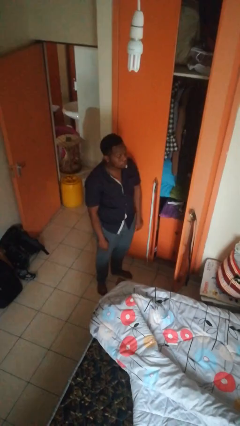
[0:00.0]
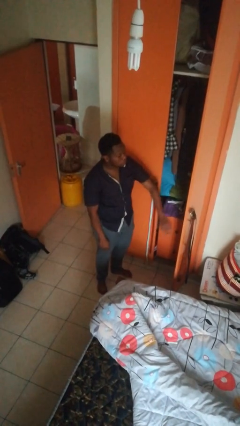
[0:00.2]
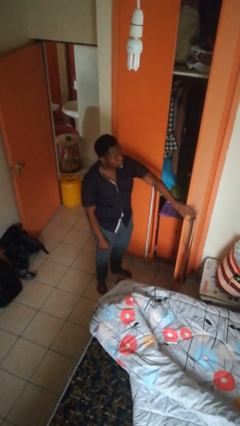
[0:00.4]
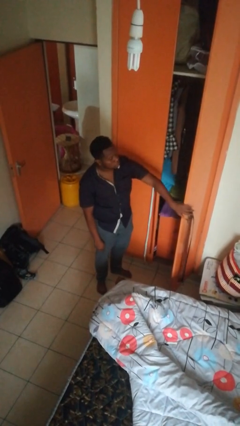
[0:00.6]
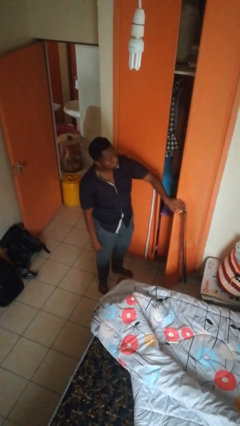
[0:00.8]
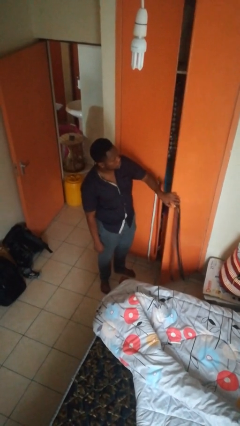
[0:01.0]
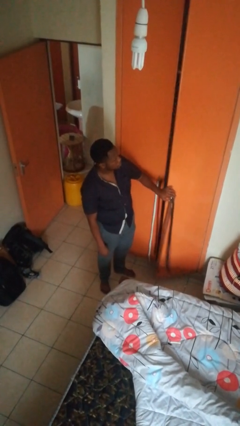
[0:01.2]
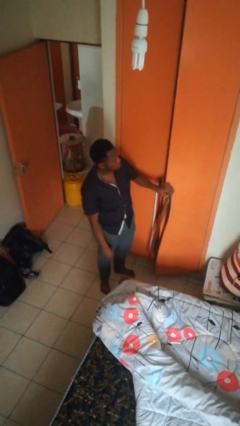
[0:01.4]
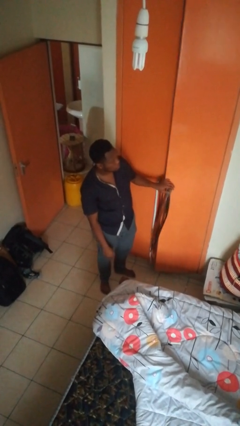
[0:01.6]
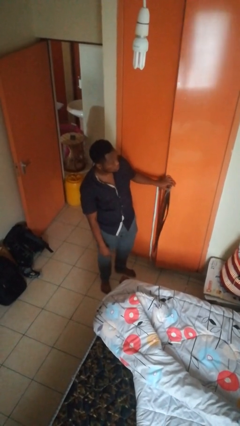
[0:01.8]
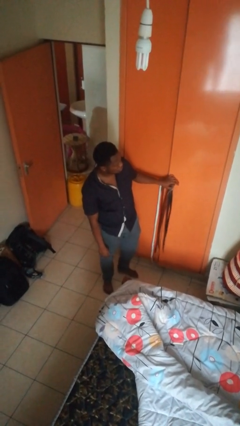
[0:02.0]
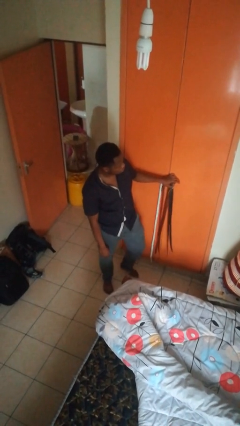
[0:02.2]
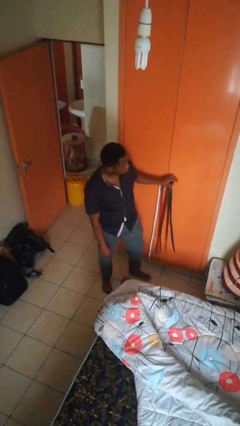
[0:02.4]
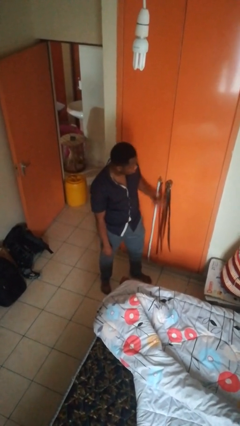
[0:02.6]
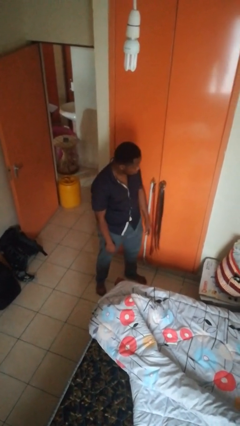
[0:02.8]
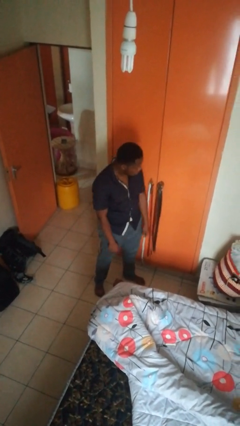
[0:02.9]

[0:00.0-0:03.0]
person closes closet door

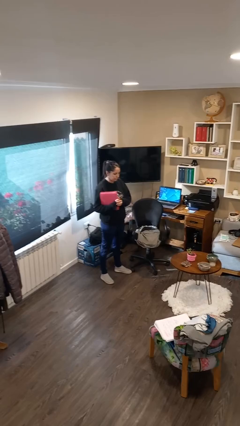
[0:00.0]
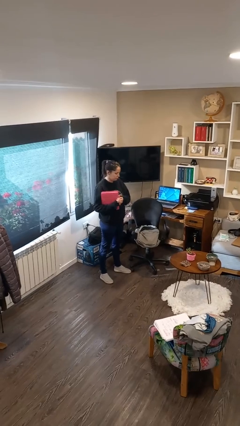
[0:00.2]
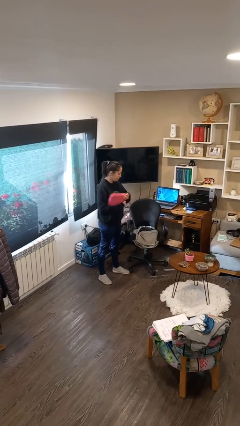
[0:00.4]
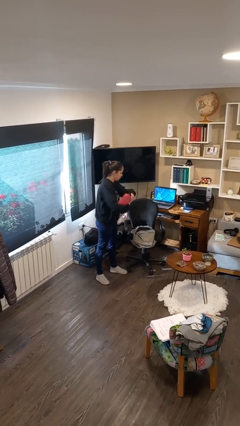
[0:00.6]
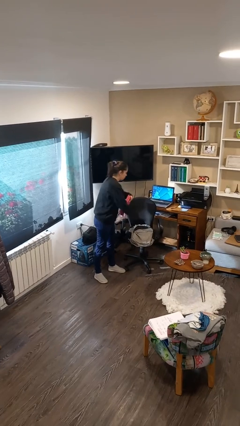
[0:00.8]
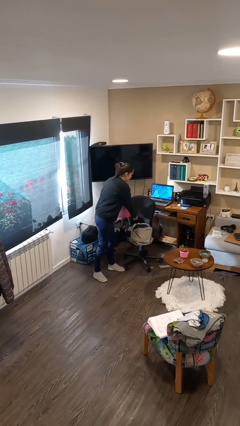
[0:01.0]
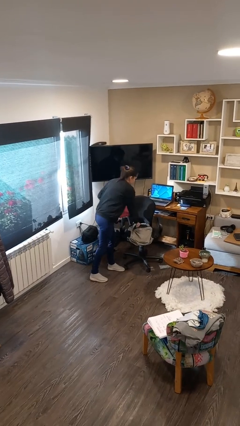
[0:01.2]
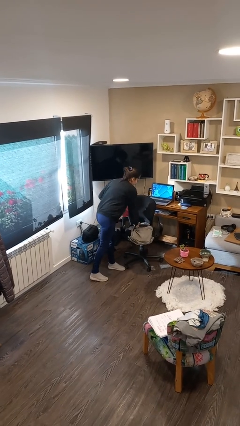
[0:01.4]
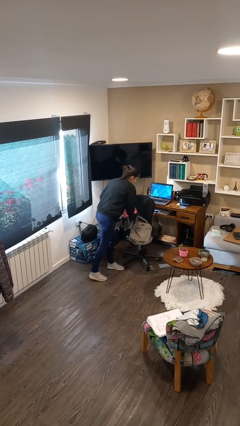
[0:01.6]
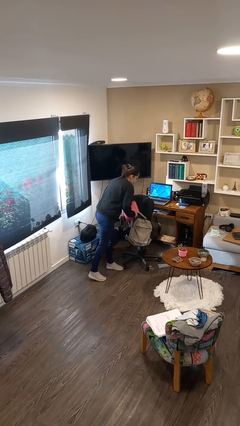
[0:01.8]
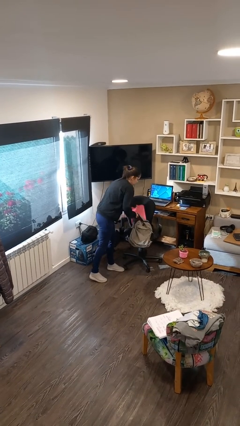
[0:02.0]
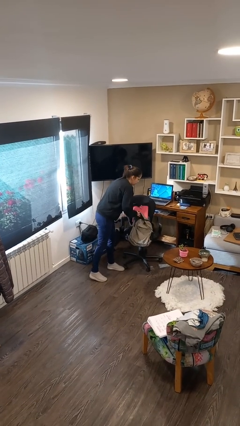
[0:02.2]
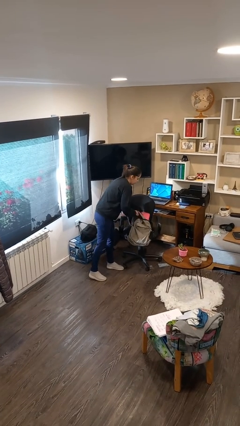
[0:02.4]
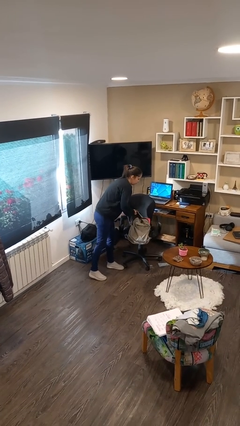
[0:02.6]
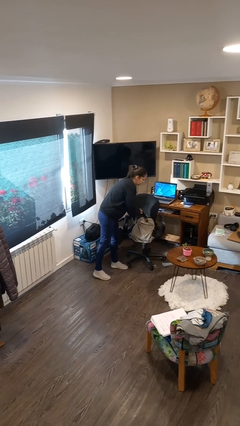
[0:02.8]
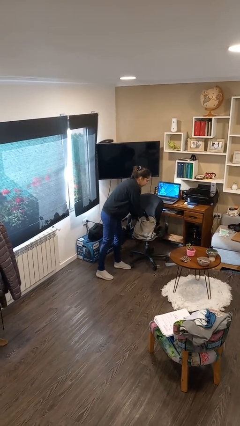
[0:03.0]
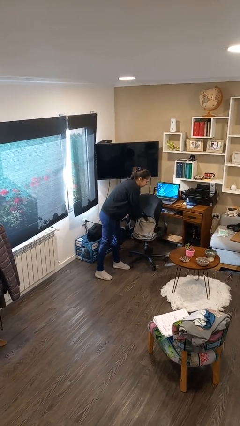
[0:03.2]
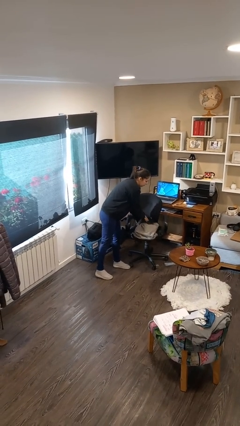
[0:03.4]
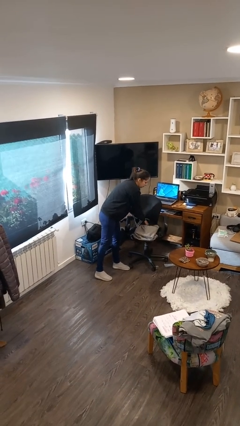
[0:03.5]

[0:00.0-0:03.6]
person puts object into backpack

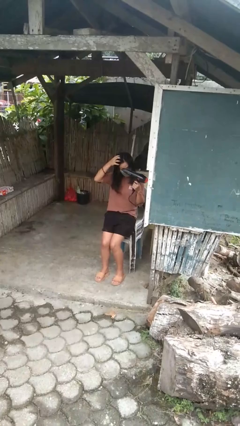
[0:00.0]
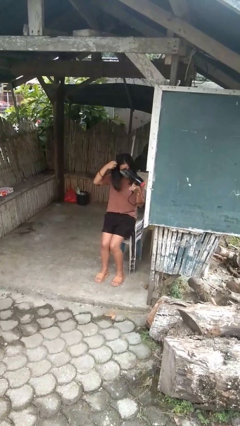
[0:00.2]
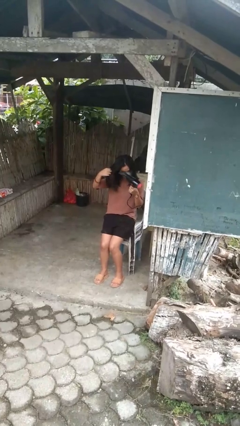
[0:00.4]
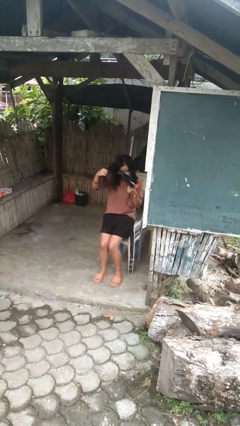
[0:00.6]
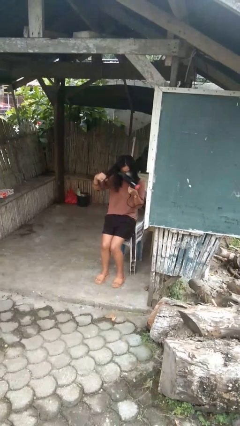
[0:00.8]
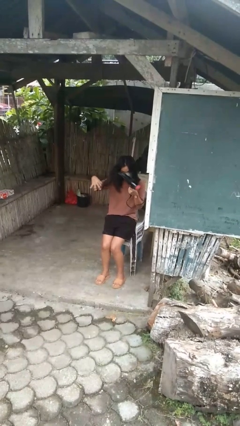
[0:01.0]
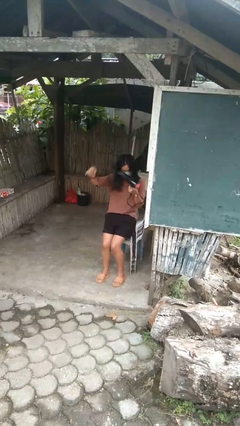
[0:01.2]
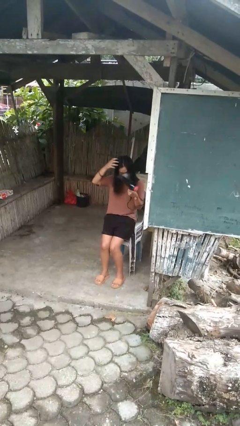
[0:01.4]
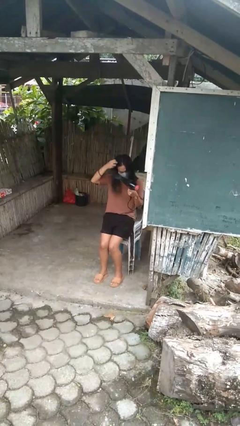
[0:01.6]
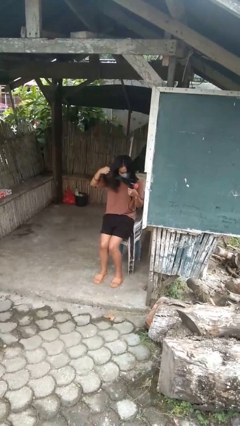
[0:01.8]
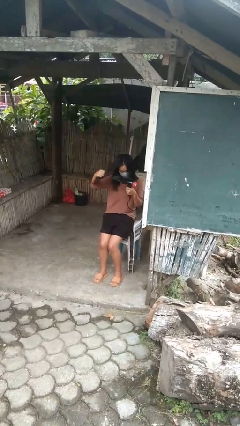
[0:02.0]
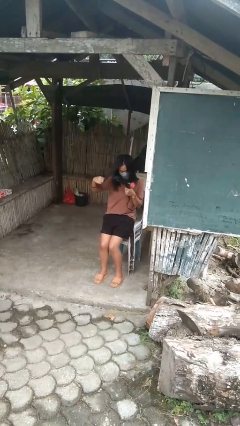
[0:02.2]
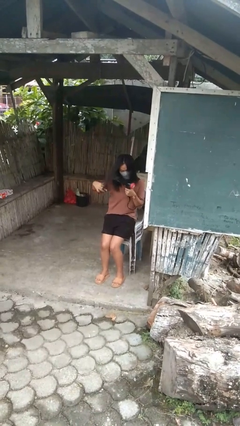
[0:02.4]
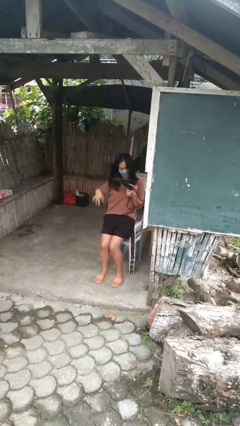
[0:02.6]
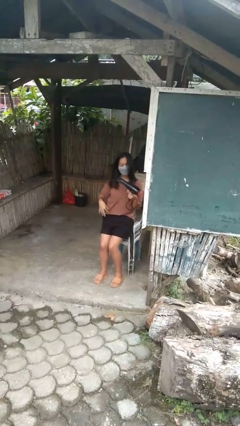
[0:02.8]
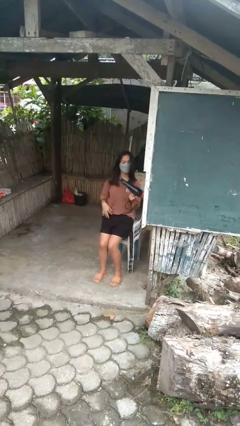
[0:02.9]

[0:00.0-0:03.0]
person dries hair with hairdryer

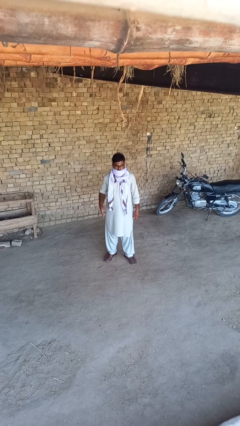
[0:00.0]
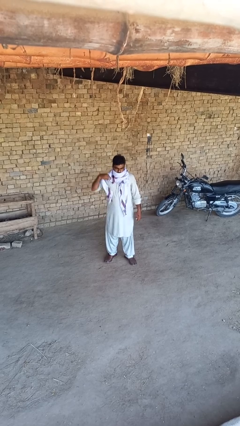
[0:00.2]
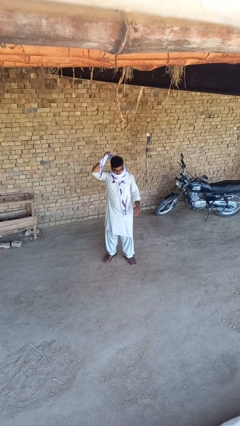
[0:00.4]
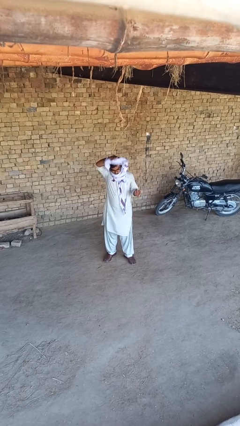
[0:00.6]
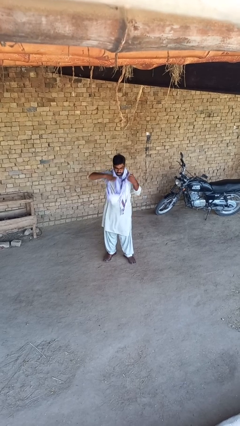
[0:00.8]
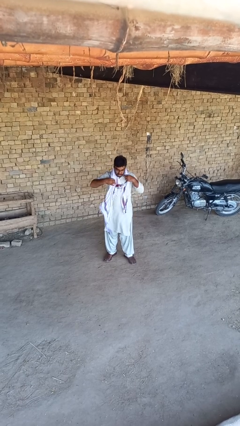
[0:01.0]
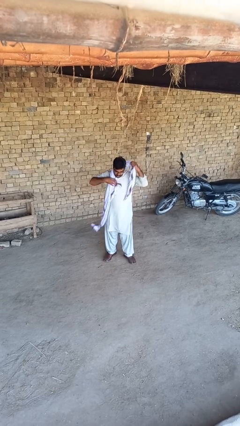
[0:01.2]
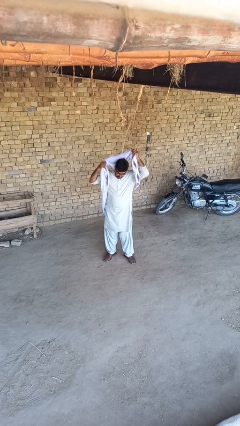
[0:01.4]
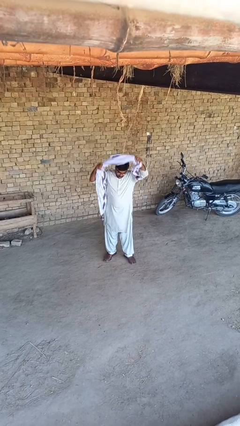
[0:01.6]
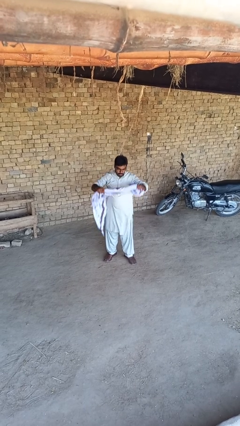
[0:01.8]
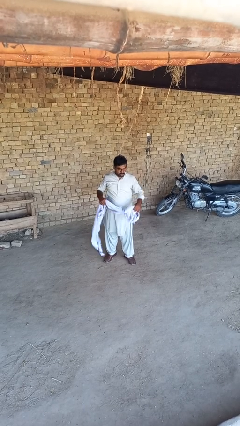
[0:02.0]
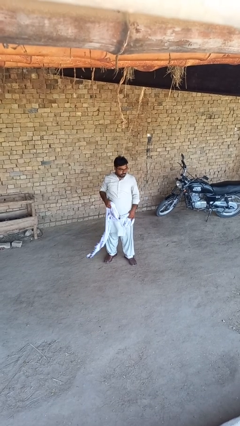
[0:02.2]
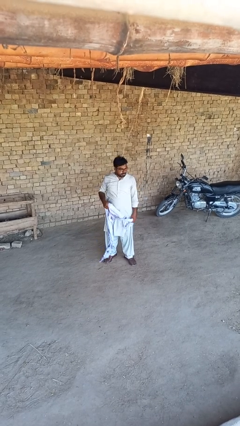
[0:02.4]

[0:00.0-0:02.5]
person takes off scarf

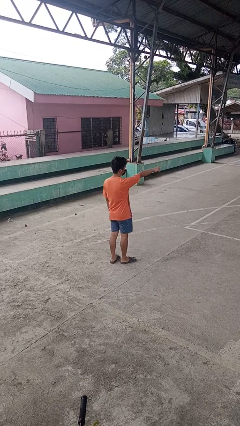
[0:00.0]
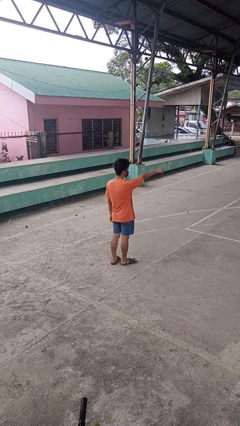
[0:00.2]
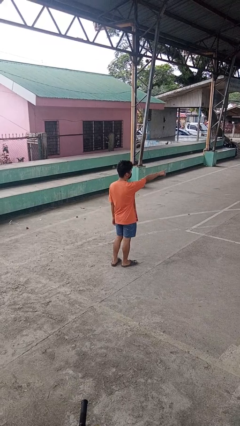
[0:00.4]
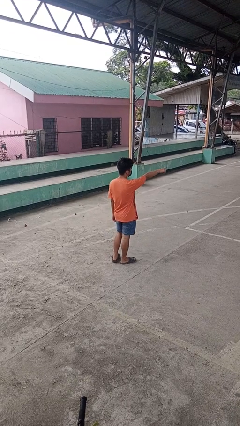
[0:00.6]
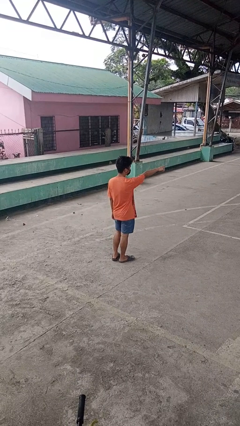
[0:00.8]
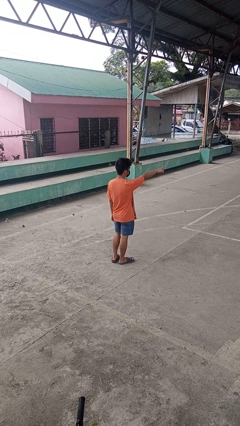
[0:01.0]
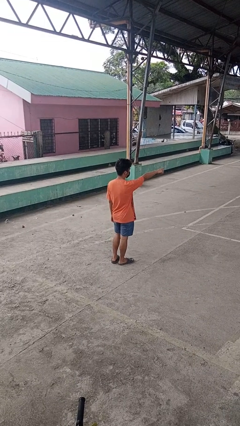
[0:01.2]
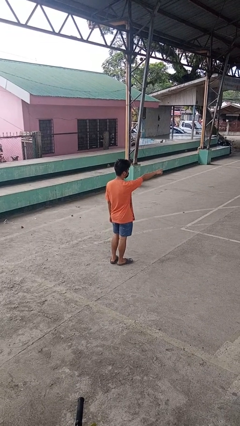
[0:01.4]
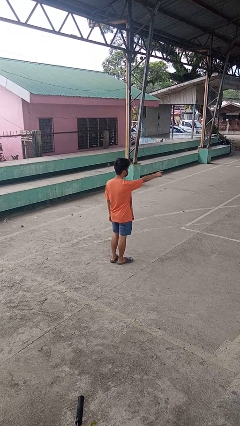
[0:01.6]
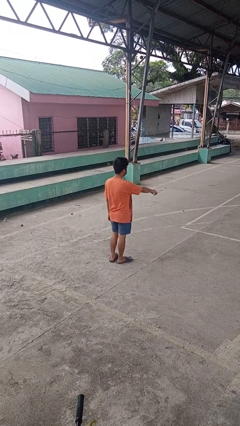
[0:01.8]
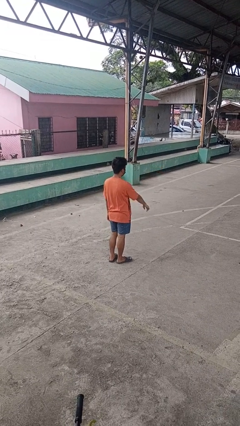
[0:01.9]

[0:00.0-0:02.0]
person points at person

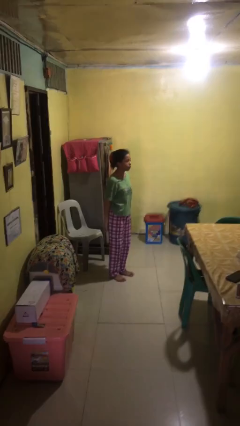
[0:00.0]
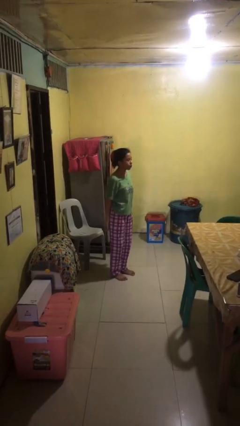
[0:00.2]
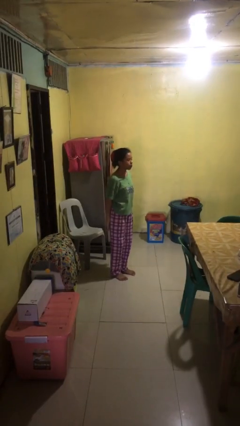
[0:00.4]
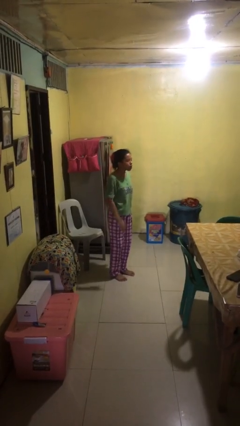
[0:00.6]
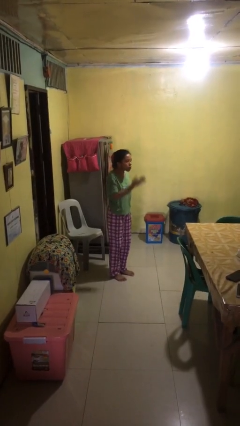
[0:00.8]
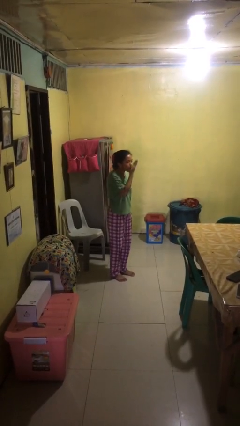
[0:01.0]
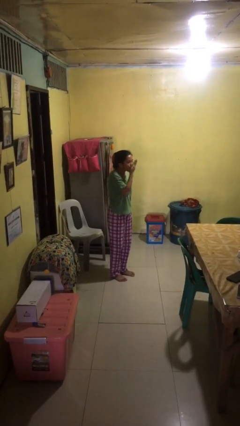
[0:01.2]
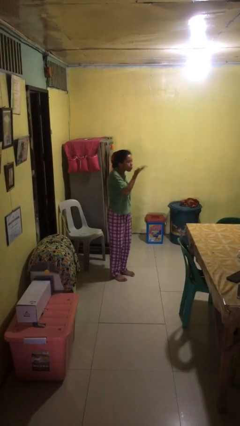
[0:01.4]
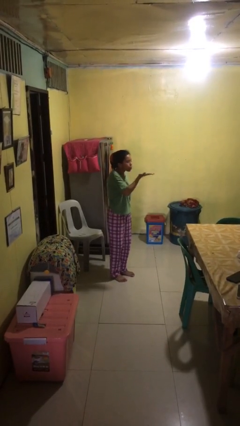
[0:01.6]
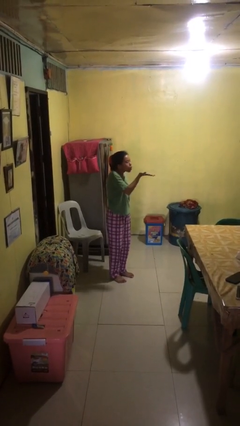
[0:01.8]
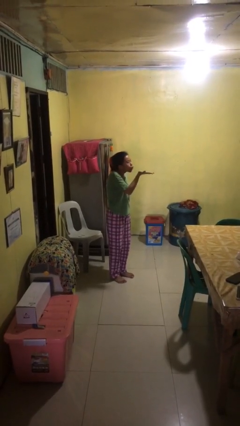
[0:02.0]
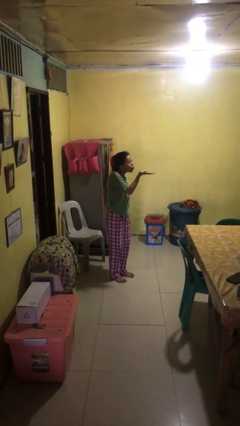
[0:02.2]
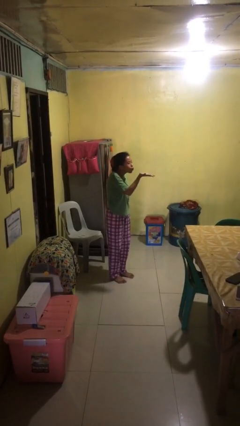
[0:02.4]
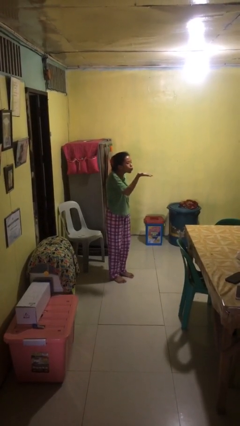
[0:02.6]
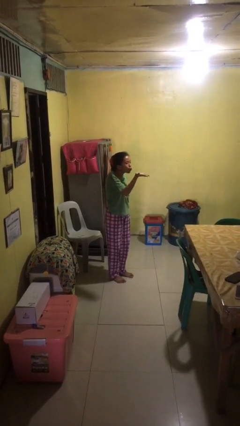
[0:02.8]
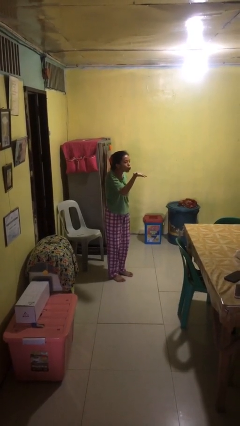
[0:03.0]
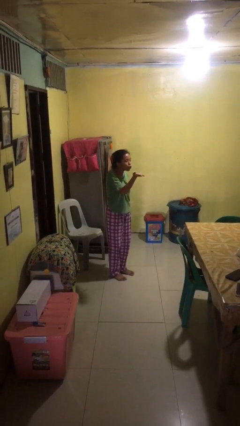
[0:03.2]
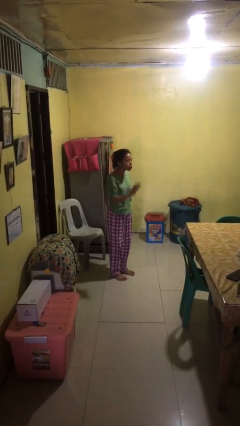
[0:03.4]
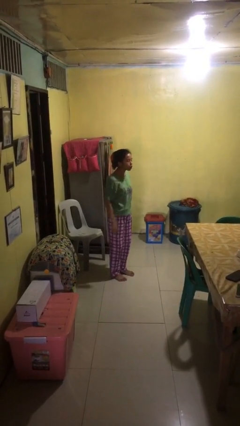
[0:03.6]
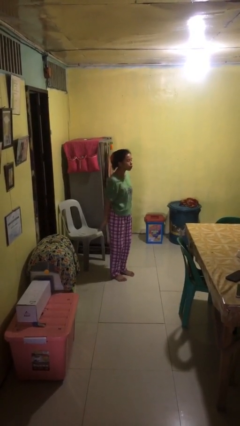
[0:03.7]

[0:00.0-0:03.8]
person gestures blow kiss
